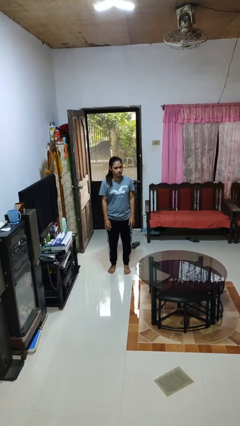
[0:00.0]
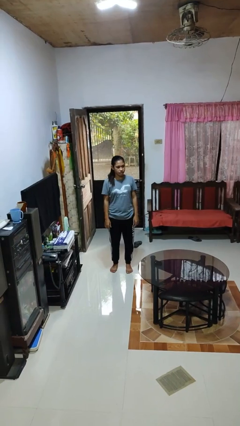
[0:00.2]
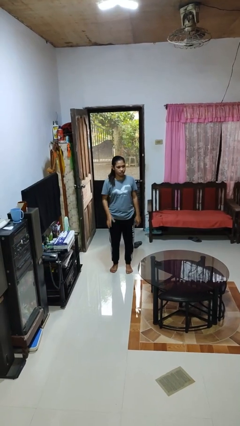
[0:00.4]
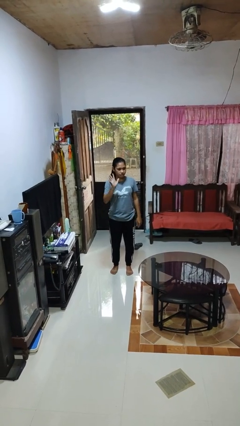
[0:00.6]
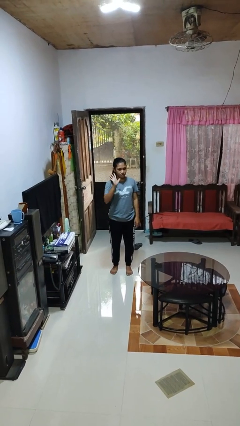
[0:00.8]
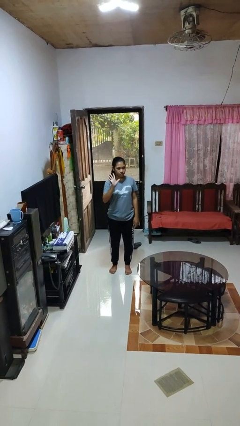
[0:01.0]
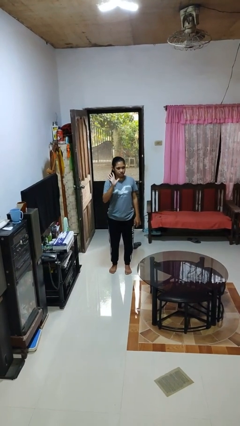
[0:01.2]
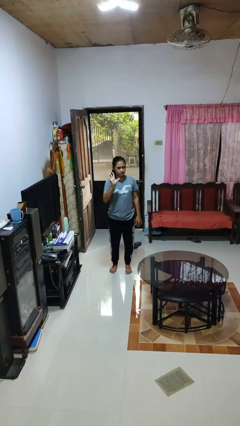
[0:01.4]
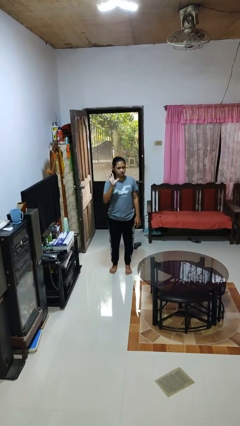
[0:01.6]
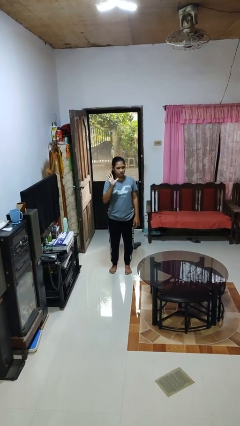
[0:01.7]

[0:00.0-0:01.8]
person gestures number five

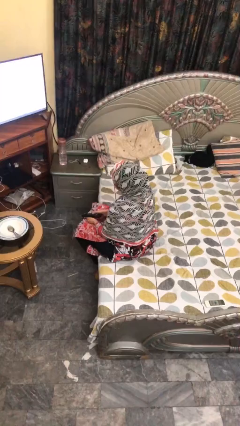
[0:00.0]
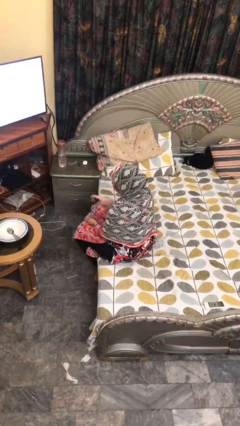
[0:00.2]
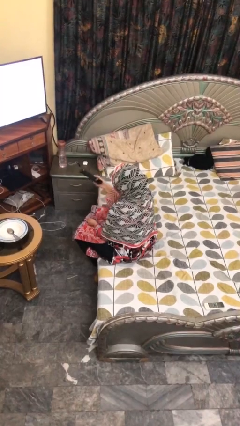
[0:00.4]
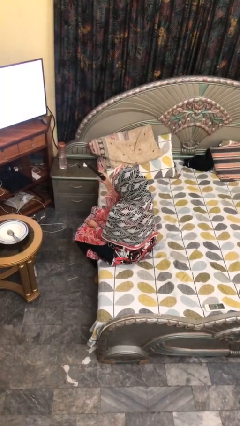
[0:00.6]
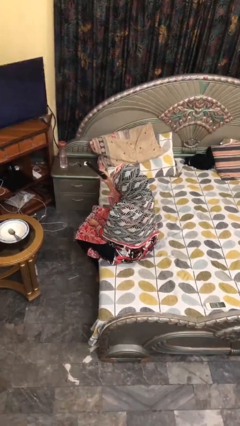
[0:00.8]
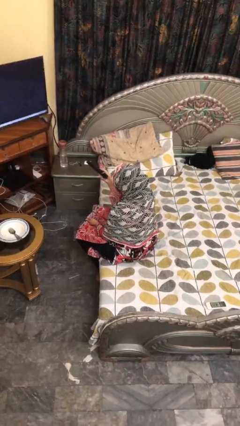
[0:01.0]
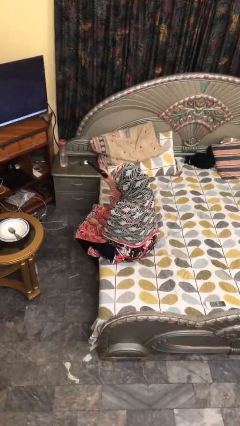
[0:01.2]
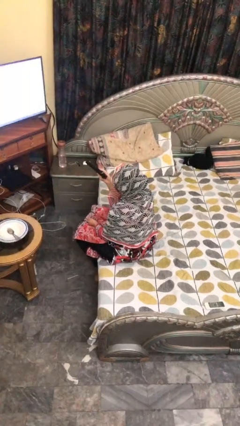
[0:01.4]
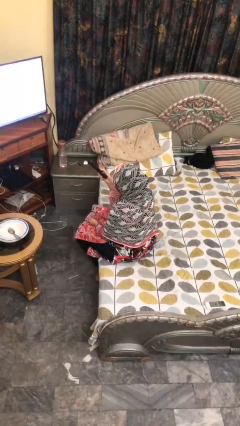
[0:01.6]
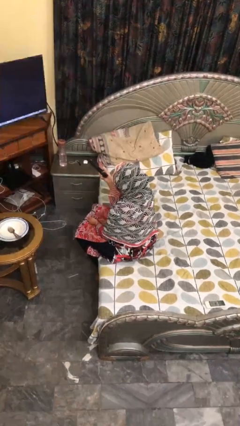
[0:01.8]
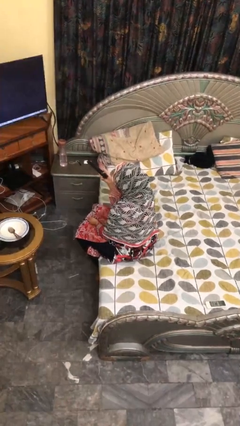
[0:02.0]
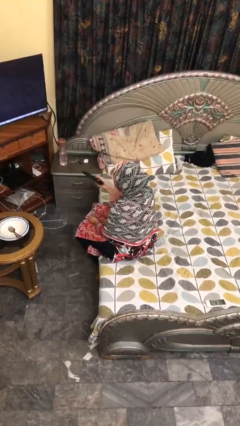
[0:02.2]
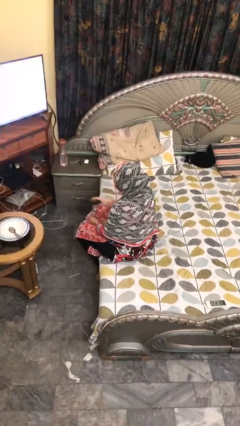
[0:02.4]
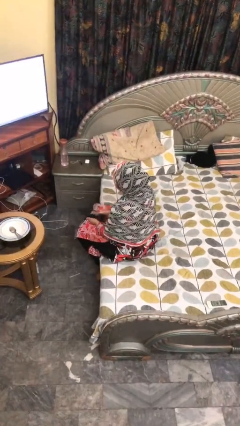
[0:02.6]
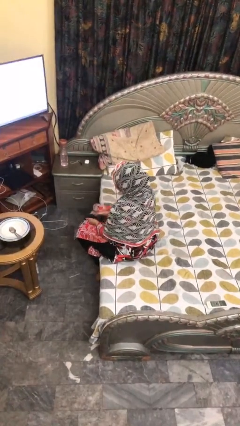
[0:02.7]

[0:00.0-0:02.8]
person uses television remote

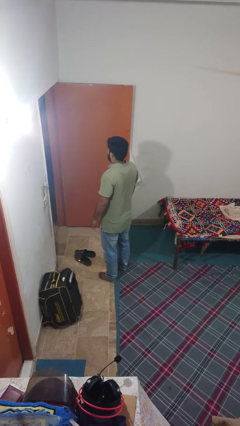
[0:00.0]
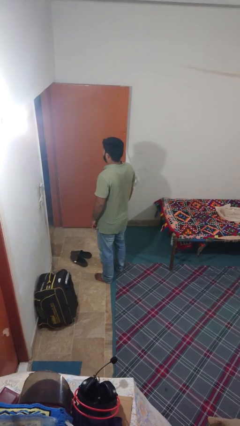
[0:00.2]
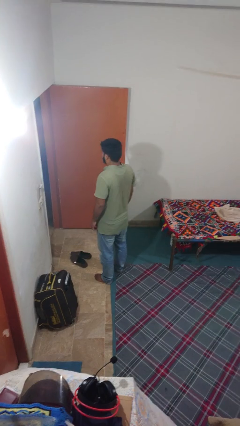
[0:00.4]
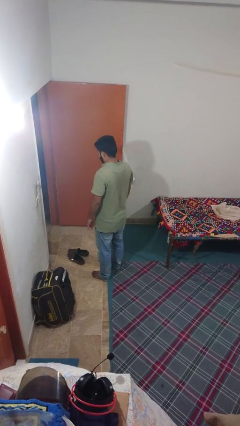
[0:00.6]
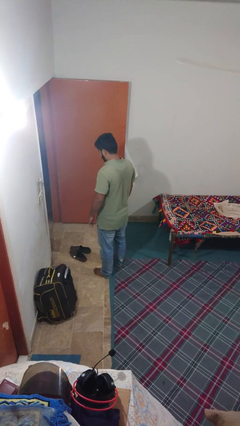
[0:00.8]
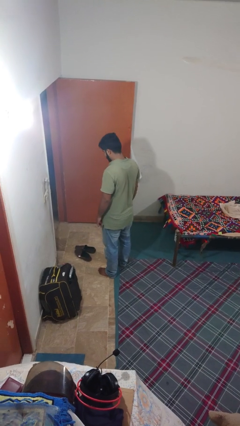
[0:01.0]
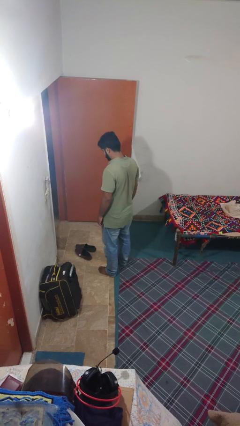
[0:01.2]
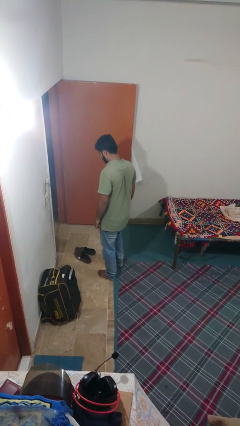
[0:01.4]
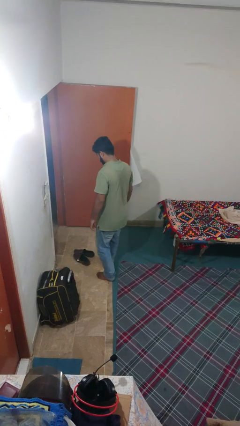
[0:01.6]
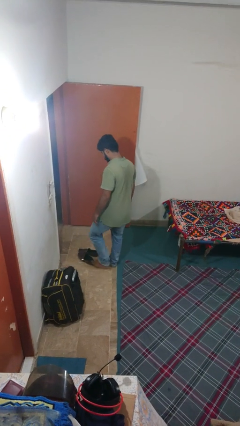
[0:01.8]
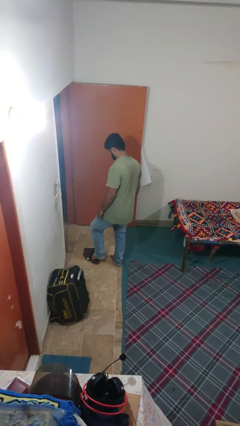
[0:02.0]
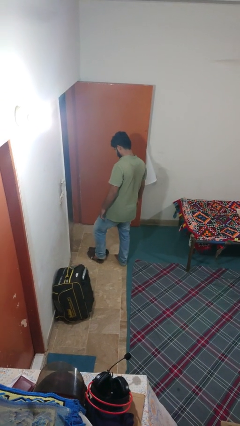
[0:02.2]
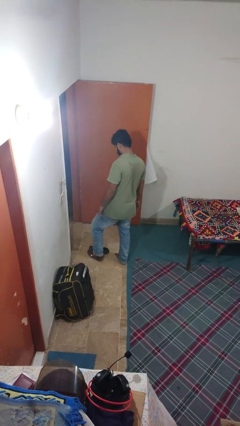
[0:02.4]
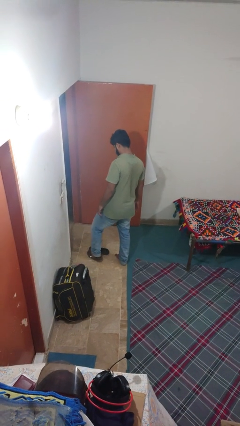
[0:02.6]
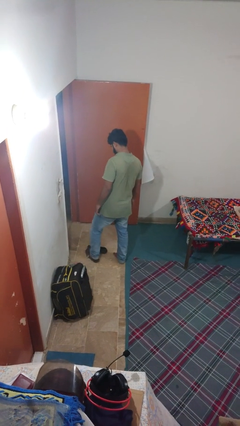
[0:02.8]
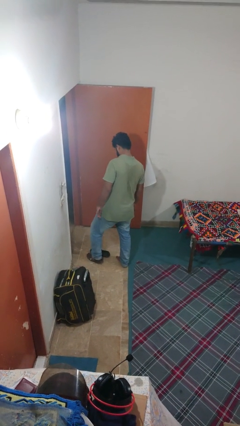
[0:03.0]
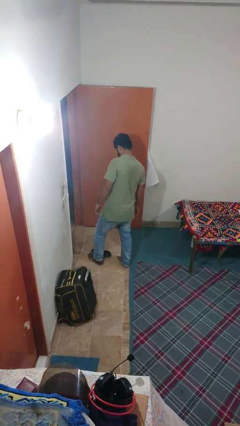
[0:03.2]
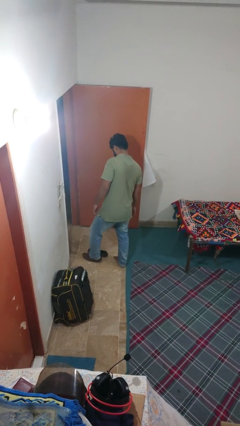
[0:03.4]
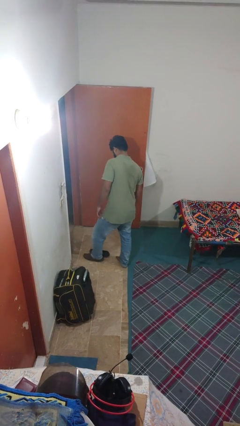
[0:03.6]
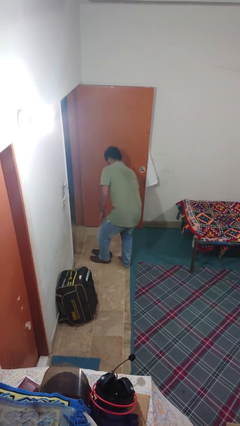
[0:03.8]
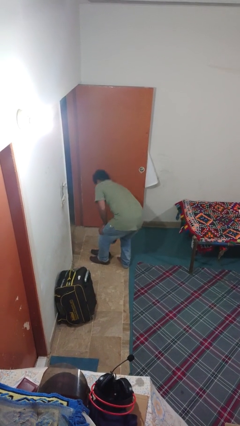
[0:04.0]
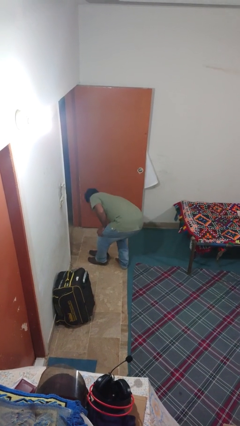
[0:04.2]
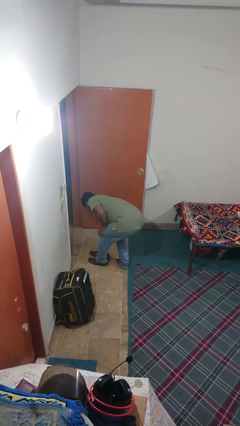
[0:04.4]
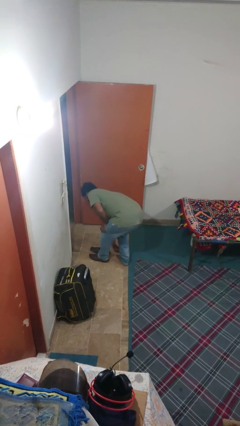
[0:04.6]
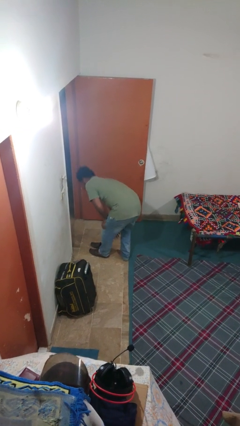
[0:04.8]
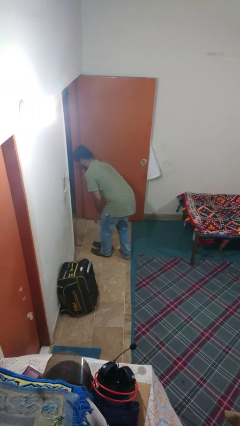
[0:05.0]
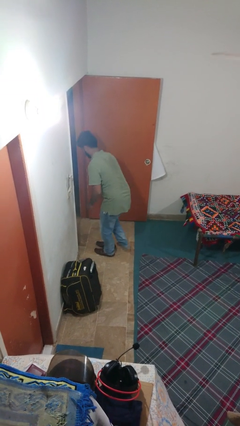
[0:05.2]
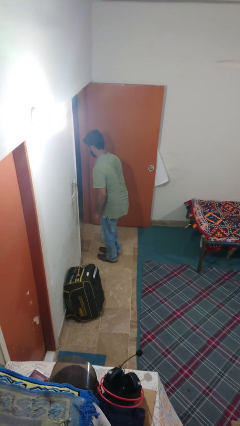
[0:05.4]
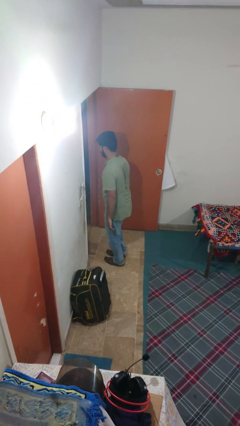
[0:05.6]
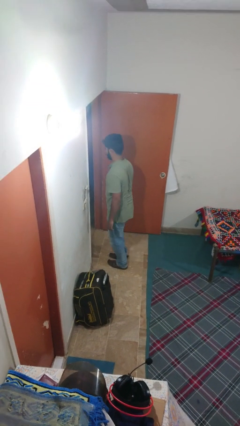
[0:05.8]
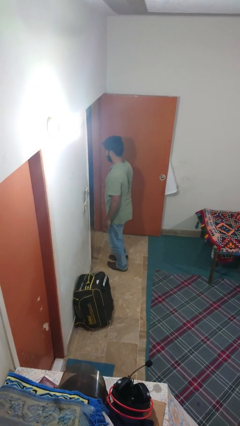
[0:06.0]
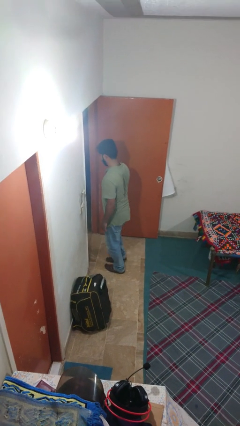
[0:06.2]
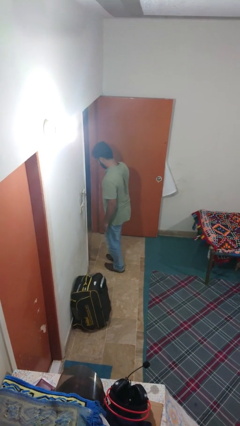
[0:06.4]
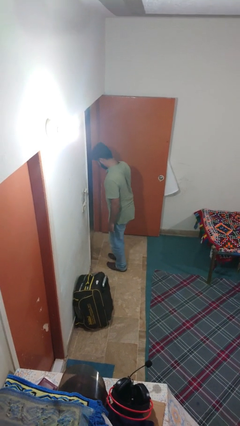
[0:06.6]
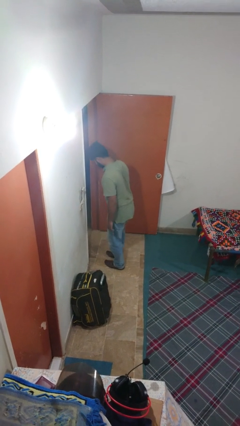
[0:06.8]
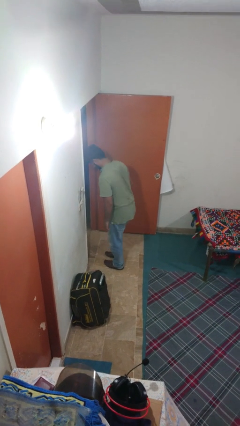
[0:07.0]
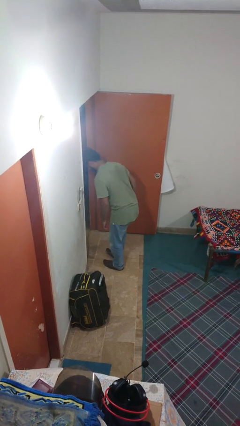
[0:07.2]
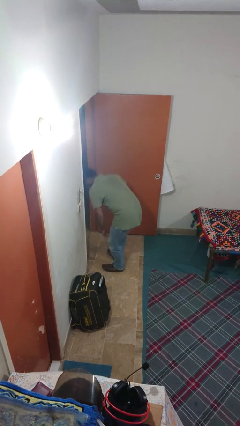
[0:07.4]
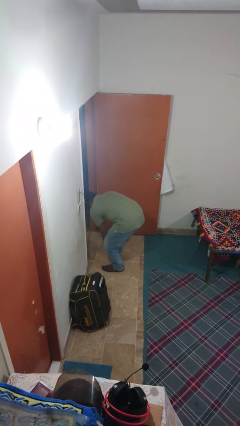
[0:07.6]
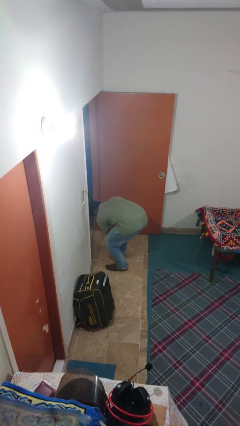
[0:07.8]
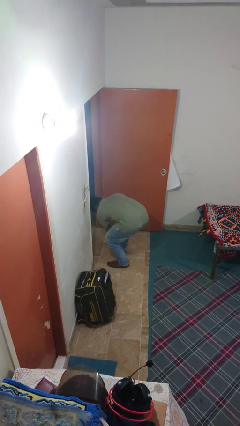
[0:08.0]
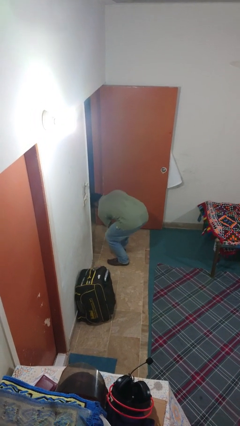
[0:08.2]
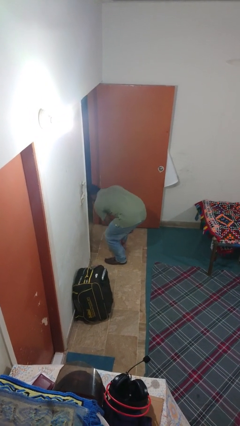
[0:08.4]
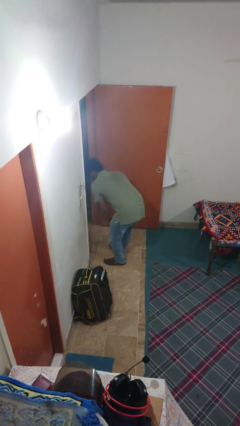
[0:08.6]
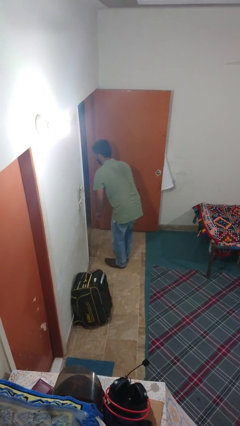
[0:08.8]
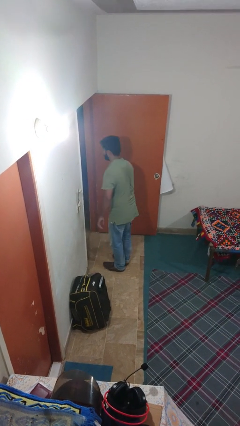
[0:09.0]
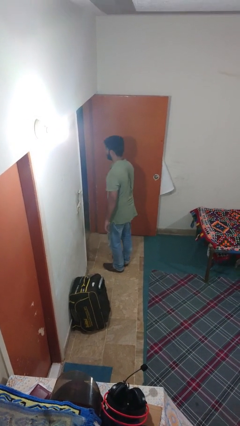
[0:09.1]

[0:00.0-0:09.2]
person puts on shoes

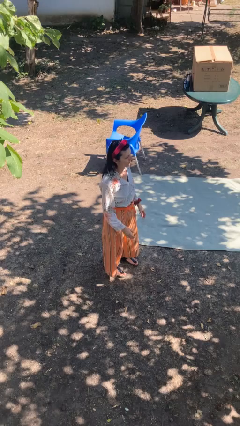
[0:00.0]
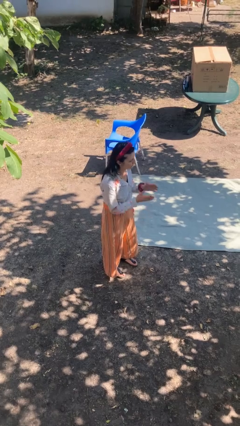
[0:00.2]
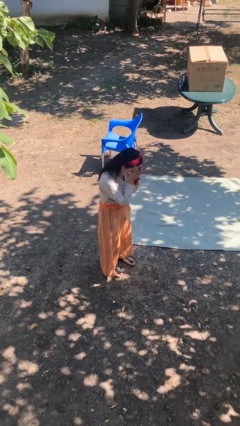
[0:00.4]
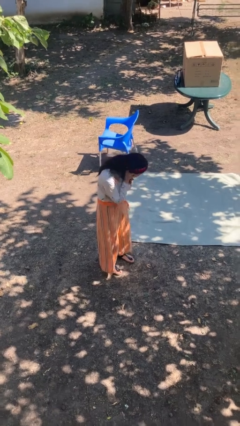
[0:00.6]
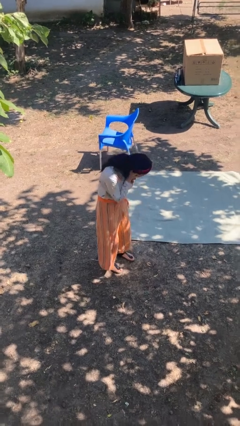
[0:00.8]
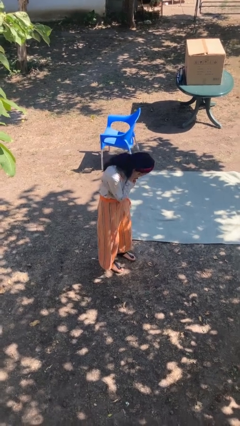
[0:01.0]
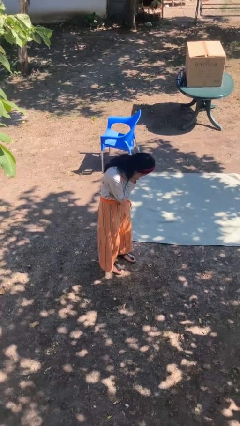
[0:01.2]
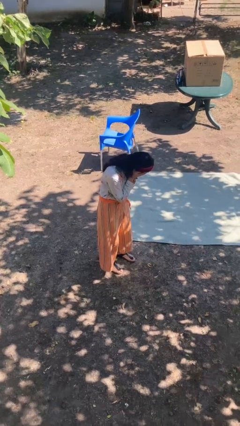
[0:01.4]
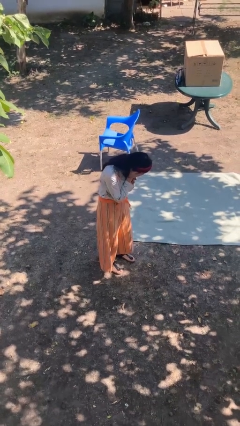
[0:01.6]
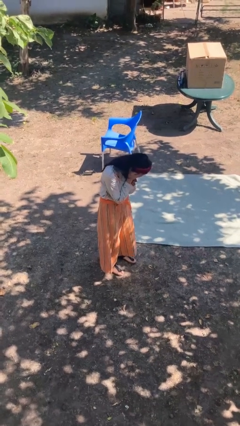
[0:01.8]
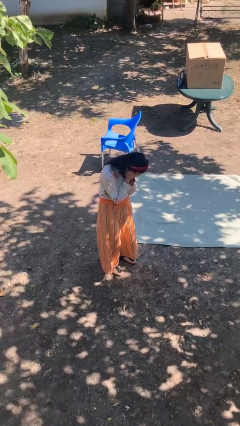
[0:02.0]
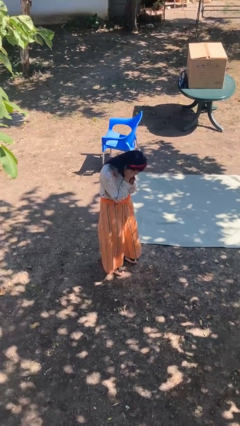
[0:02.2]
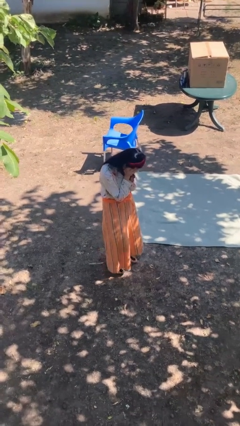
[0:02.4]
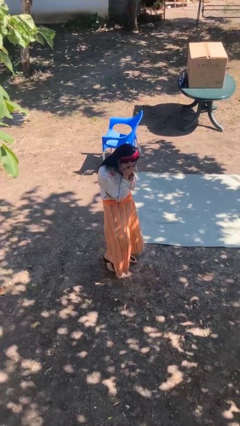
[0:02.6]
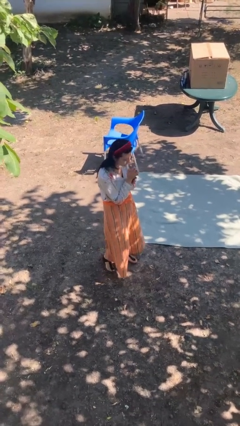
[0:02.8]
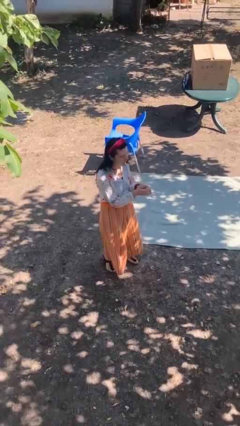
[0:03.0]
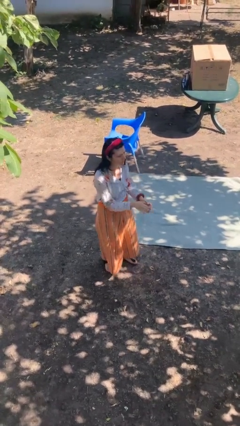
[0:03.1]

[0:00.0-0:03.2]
person covers face with hands

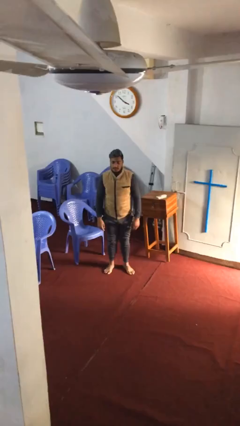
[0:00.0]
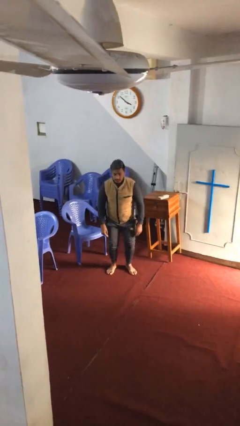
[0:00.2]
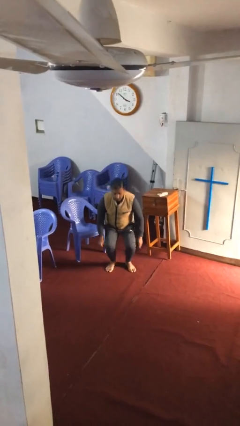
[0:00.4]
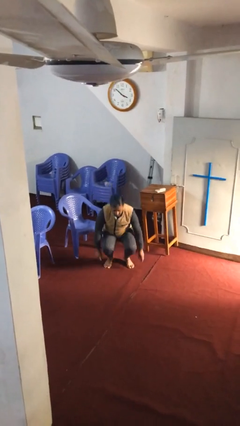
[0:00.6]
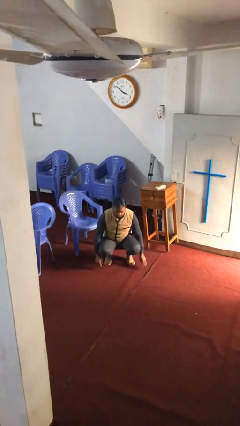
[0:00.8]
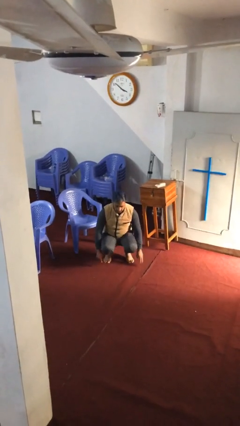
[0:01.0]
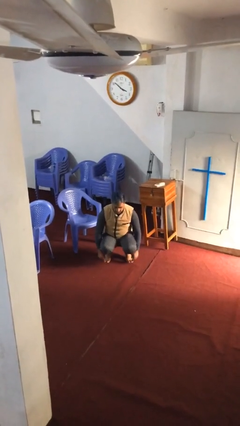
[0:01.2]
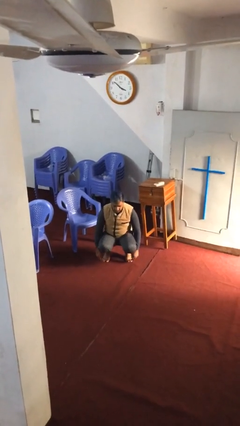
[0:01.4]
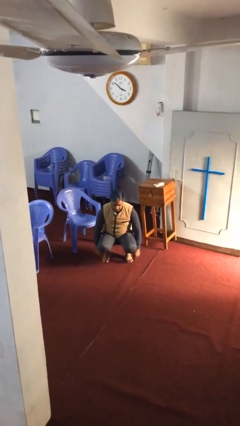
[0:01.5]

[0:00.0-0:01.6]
person sits down
